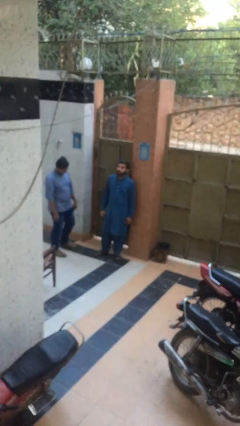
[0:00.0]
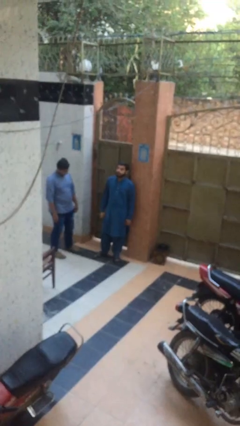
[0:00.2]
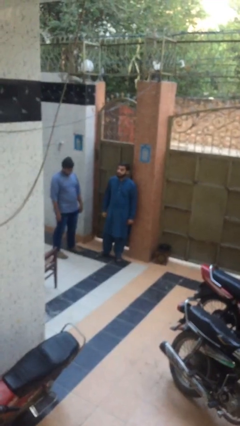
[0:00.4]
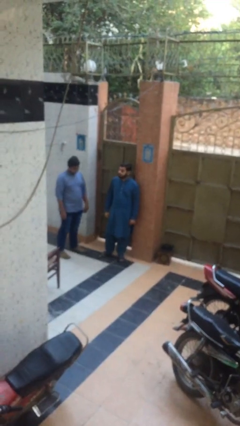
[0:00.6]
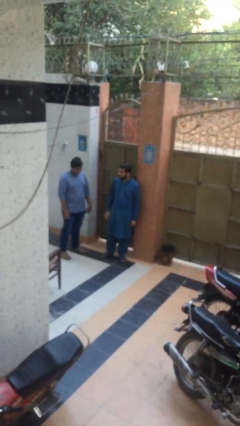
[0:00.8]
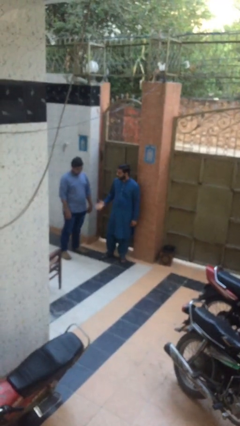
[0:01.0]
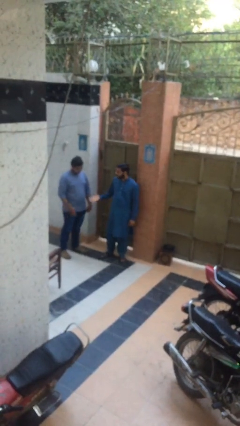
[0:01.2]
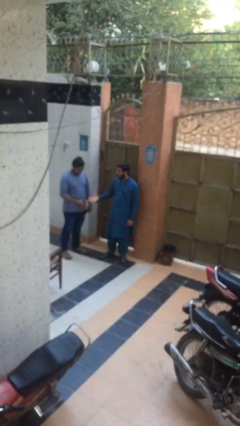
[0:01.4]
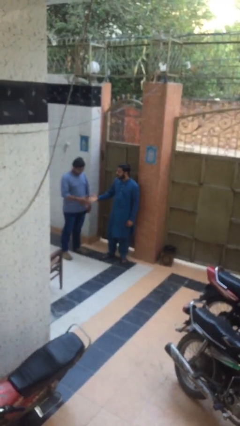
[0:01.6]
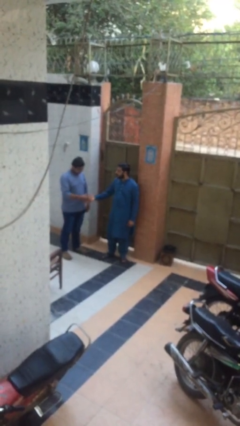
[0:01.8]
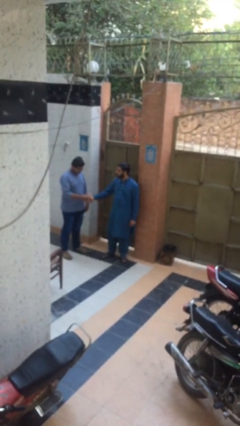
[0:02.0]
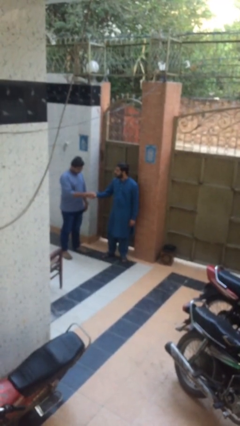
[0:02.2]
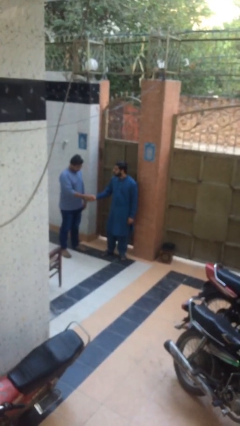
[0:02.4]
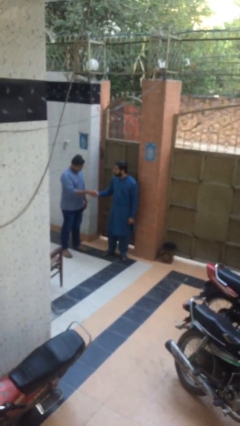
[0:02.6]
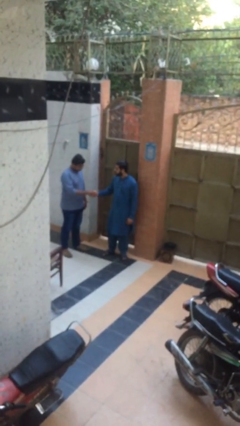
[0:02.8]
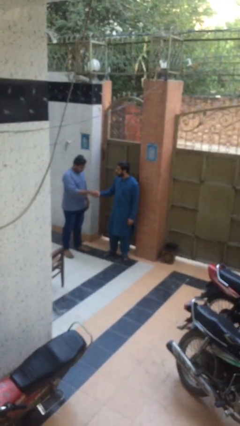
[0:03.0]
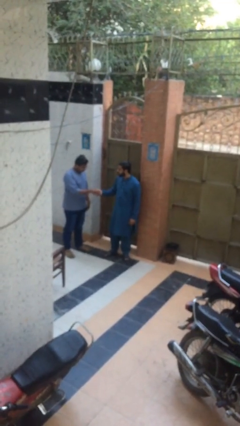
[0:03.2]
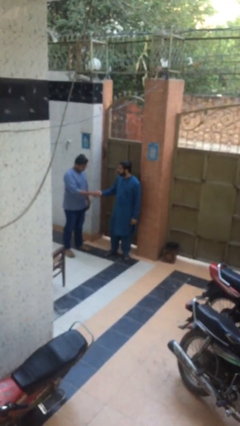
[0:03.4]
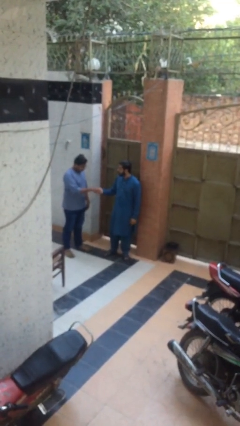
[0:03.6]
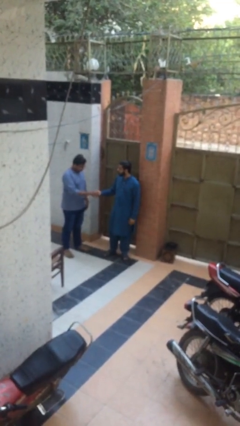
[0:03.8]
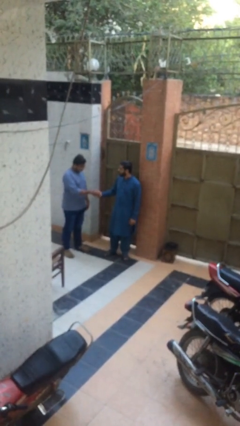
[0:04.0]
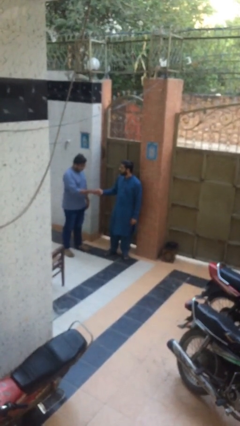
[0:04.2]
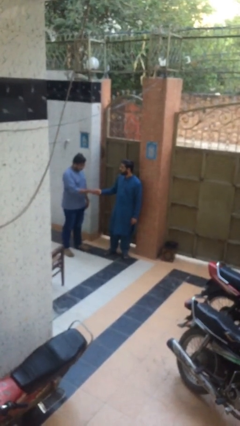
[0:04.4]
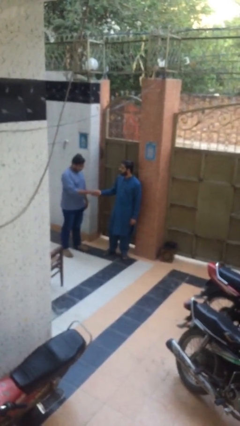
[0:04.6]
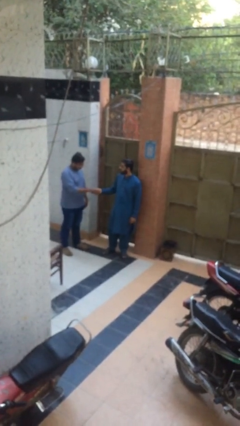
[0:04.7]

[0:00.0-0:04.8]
person shakes hand

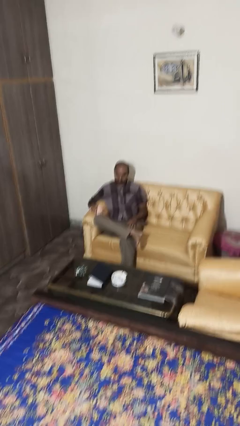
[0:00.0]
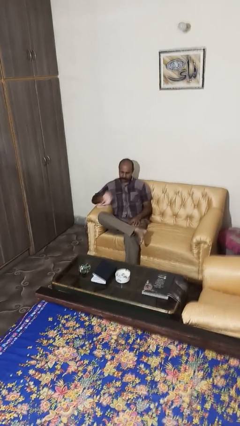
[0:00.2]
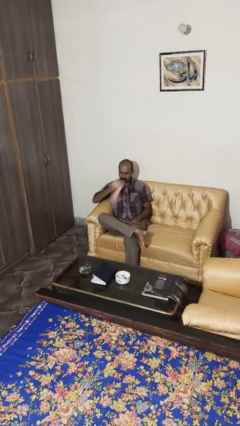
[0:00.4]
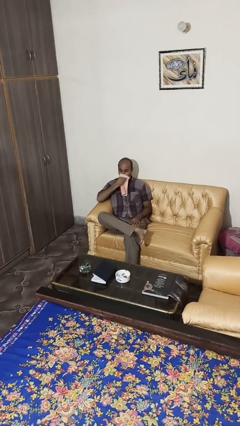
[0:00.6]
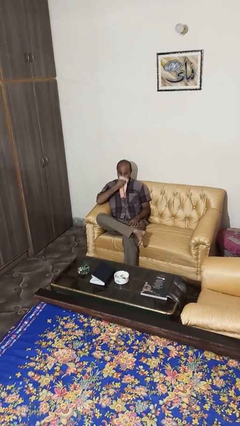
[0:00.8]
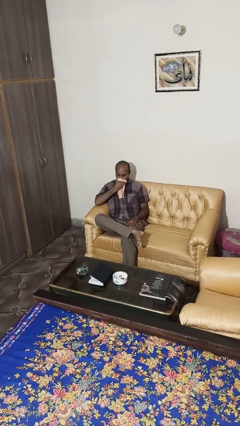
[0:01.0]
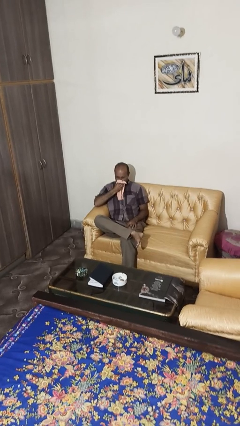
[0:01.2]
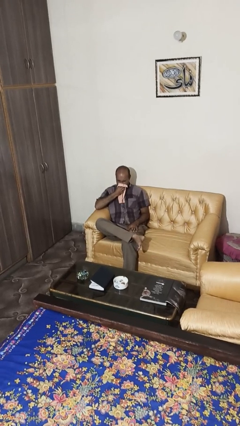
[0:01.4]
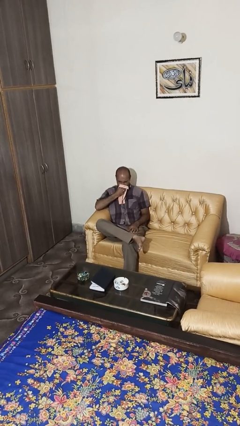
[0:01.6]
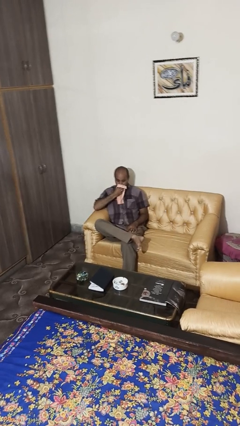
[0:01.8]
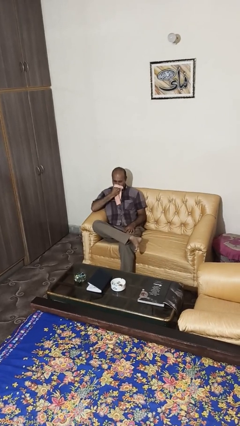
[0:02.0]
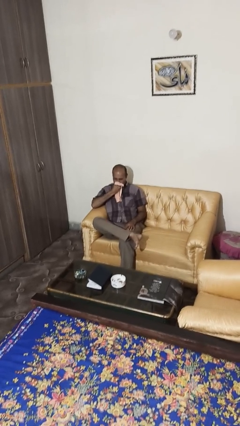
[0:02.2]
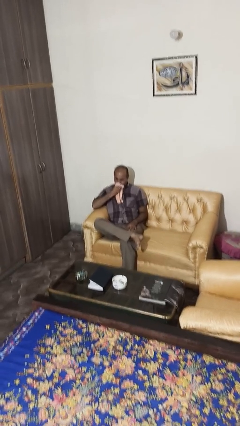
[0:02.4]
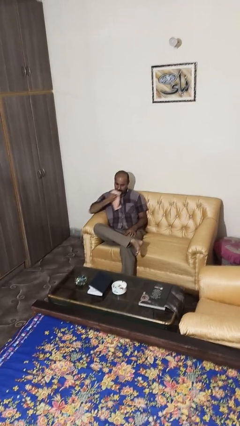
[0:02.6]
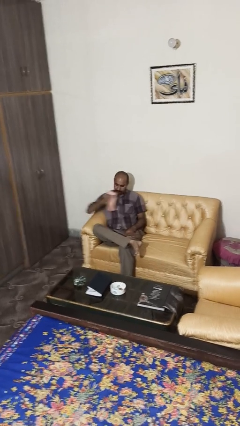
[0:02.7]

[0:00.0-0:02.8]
person blows nose

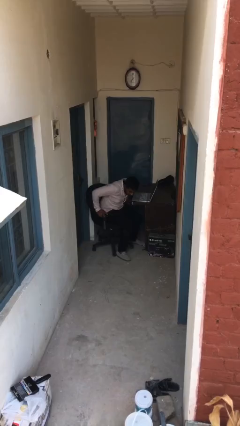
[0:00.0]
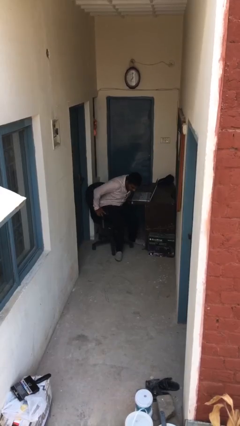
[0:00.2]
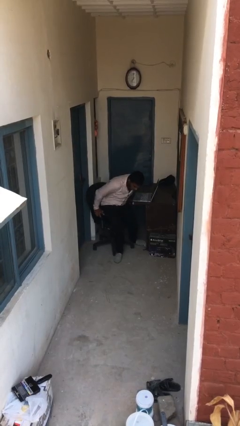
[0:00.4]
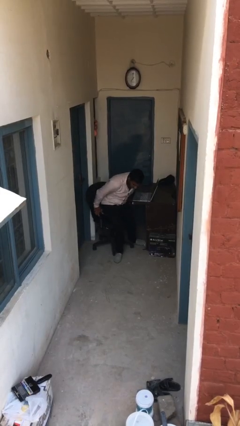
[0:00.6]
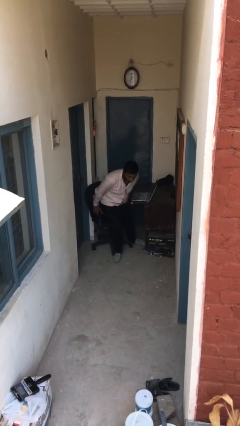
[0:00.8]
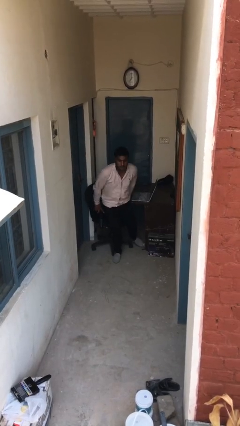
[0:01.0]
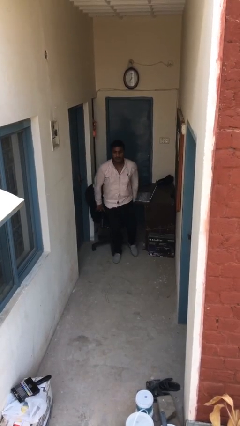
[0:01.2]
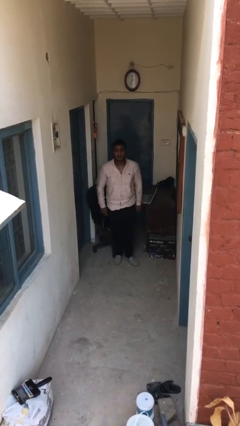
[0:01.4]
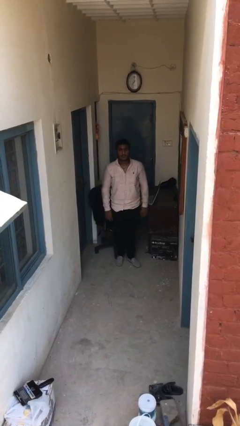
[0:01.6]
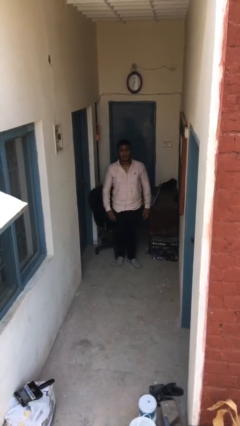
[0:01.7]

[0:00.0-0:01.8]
person stands up

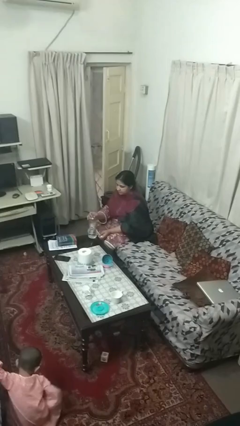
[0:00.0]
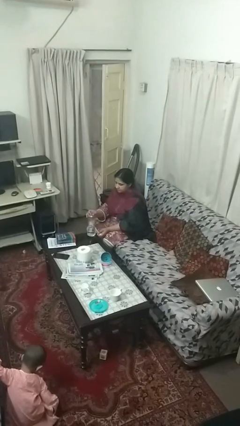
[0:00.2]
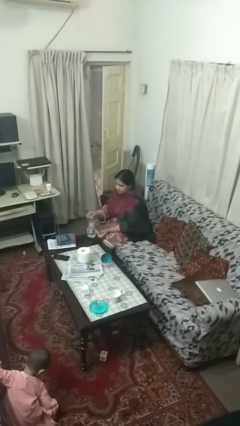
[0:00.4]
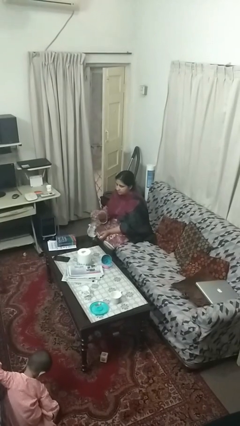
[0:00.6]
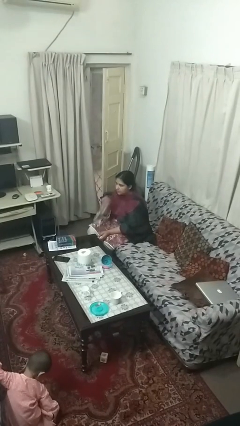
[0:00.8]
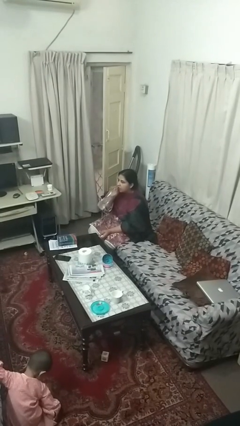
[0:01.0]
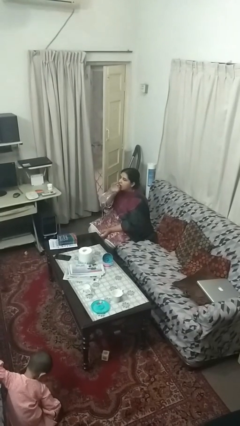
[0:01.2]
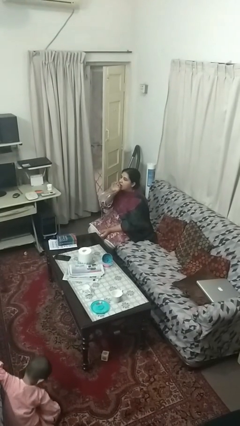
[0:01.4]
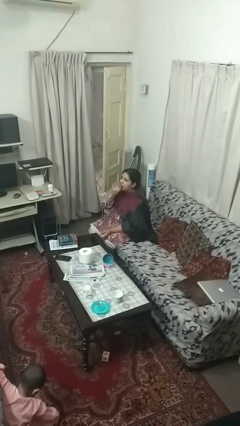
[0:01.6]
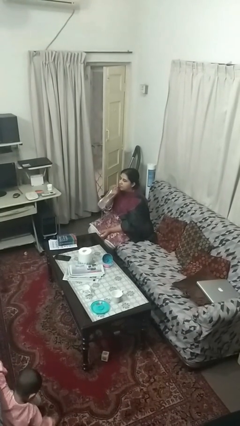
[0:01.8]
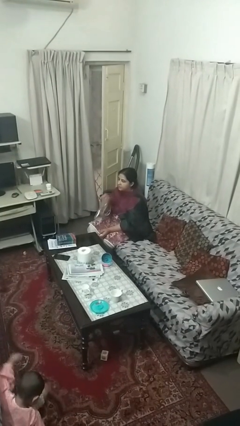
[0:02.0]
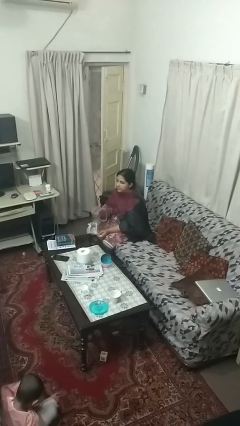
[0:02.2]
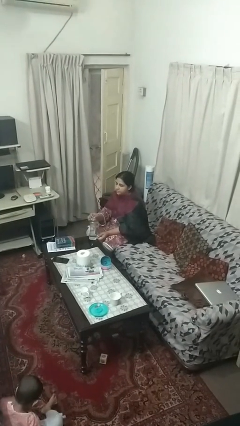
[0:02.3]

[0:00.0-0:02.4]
person drinks from bottle

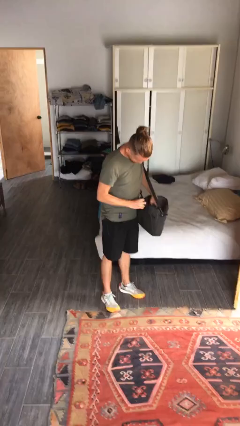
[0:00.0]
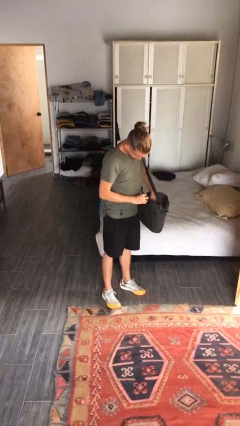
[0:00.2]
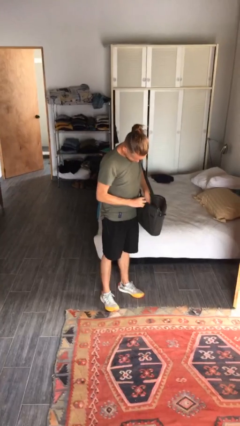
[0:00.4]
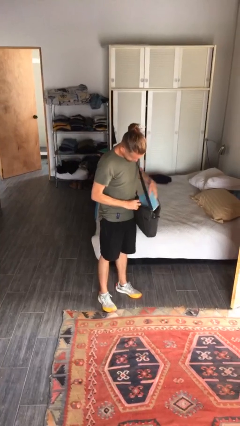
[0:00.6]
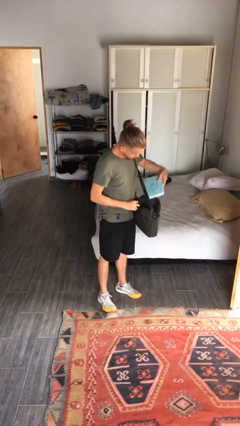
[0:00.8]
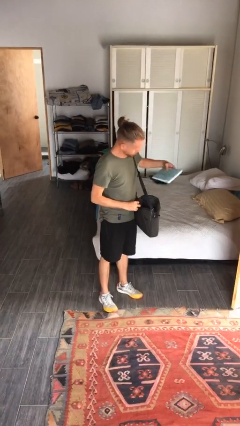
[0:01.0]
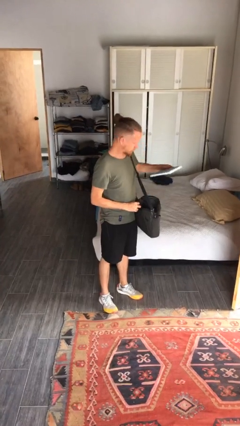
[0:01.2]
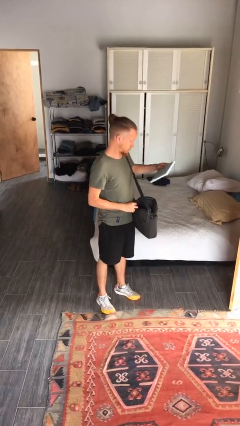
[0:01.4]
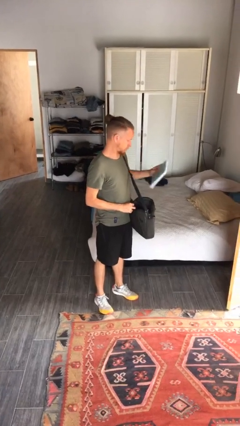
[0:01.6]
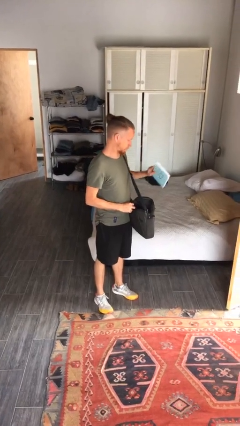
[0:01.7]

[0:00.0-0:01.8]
person takes object from purse

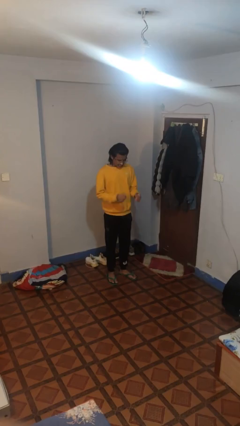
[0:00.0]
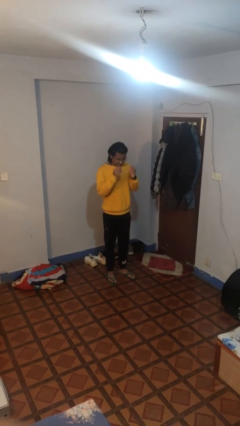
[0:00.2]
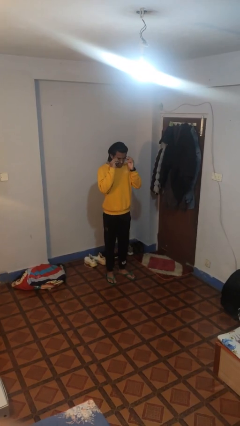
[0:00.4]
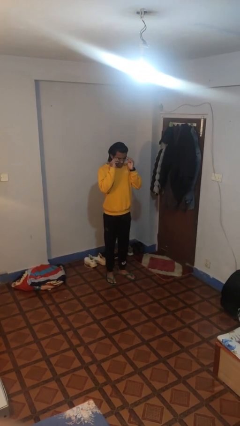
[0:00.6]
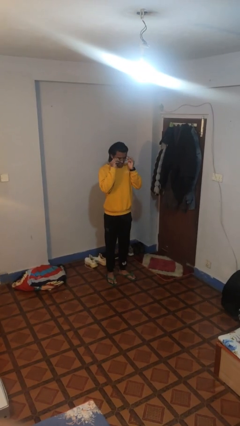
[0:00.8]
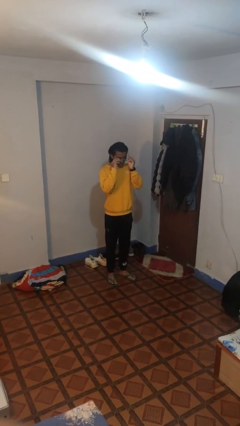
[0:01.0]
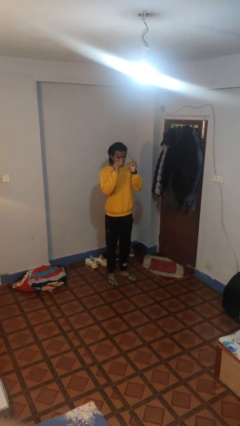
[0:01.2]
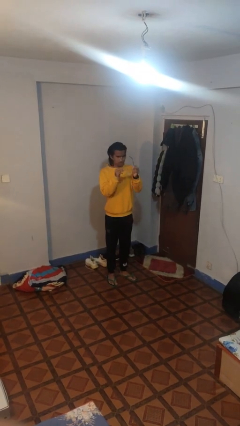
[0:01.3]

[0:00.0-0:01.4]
person takes off glasses

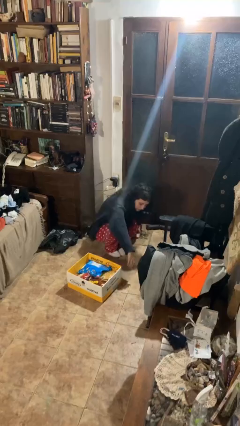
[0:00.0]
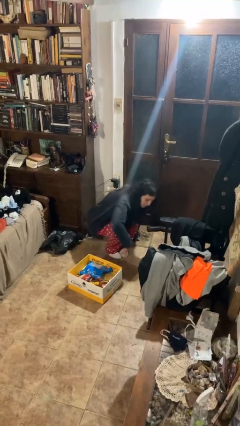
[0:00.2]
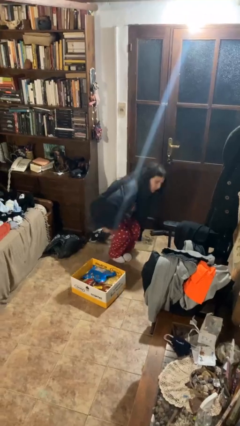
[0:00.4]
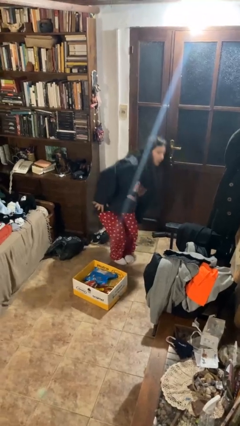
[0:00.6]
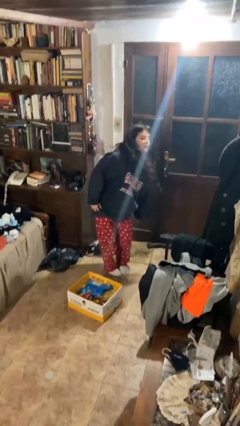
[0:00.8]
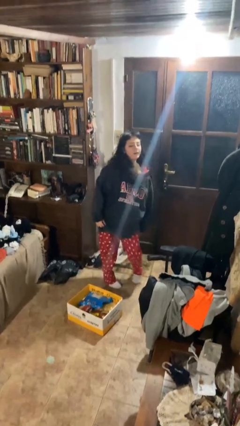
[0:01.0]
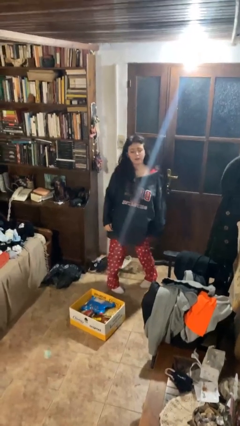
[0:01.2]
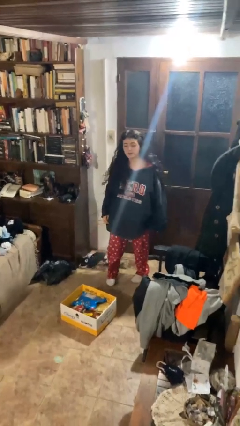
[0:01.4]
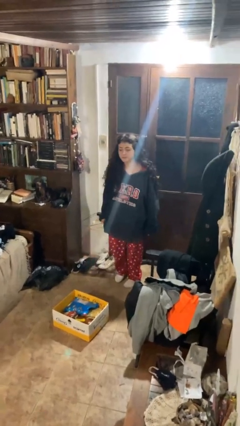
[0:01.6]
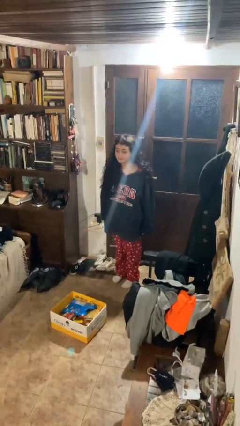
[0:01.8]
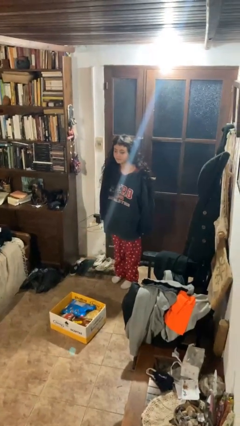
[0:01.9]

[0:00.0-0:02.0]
person stands up from floor
